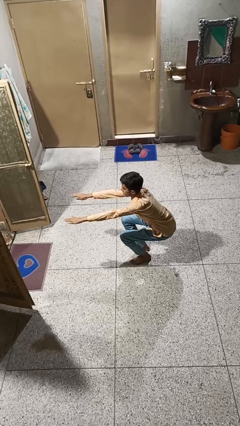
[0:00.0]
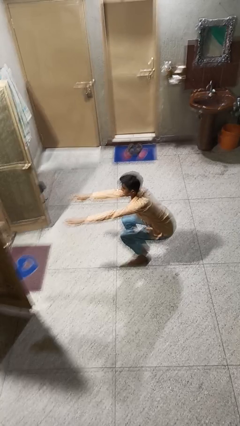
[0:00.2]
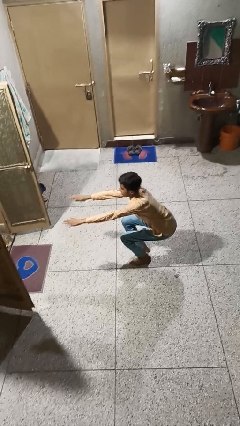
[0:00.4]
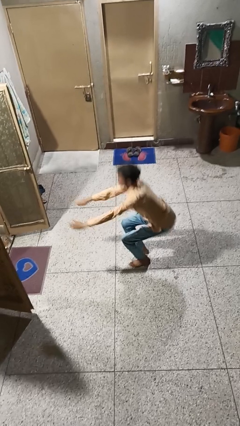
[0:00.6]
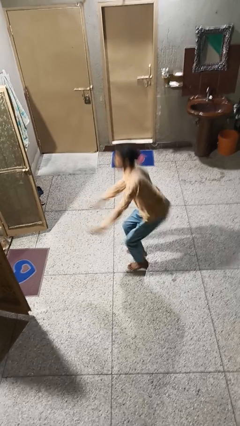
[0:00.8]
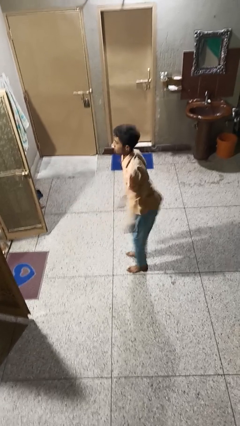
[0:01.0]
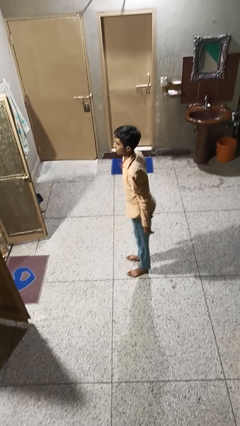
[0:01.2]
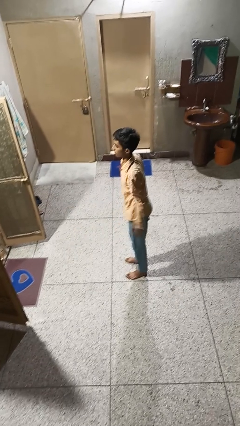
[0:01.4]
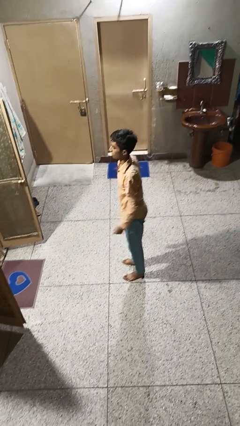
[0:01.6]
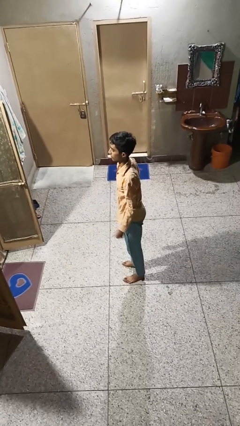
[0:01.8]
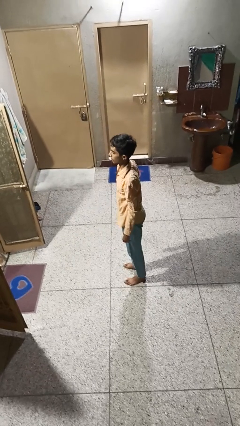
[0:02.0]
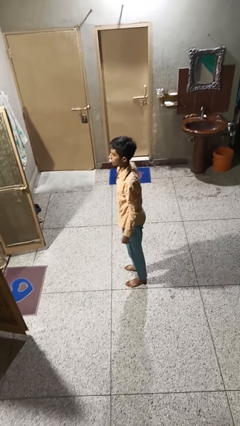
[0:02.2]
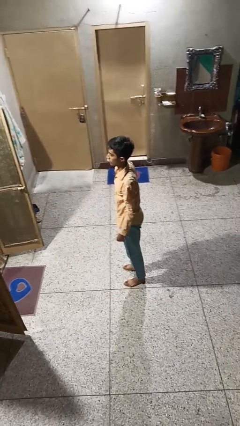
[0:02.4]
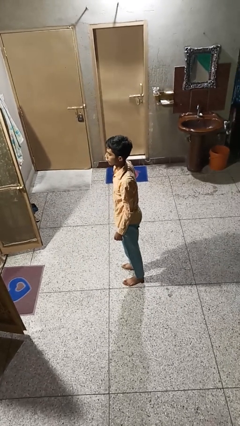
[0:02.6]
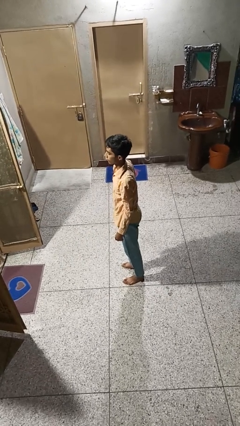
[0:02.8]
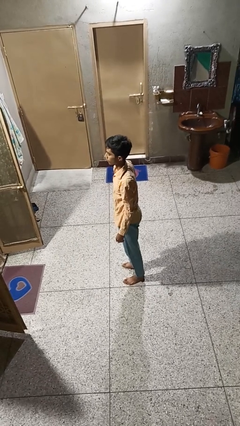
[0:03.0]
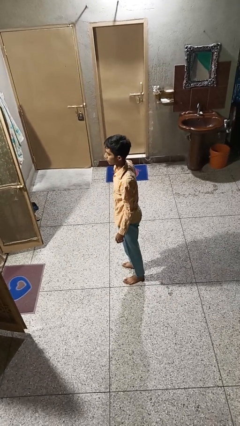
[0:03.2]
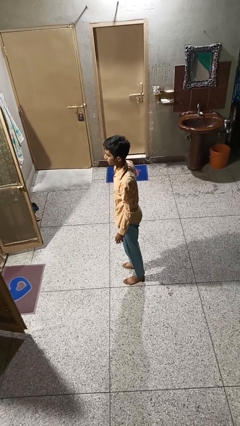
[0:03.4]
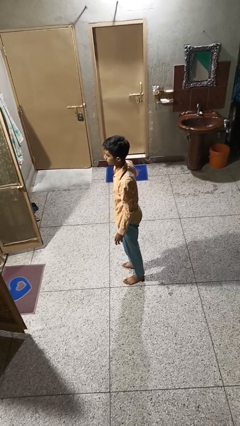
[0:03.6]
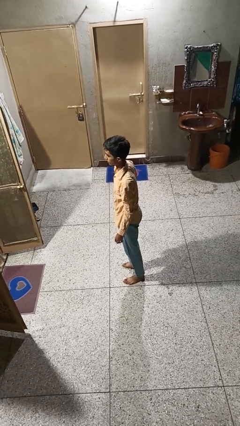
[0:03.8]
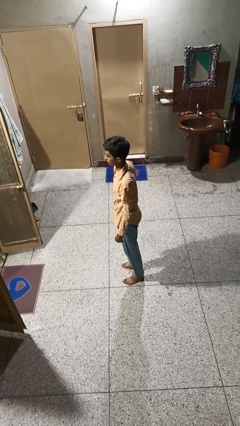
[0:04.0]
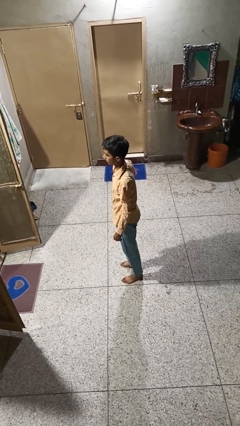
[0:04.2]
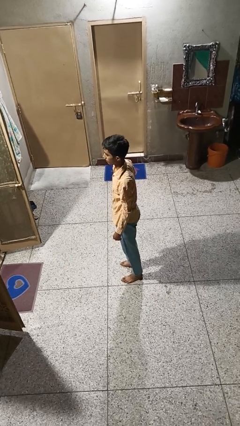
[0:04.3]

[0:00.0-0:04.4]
person stands up

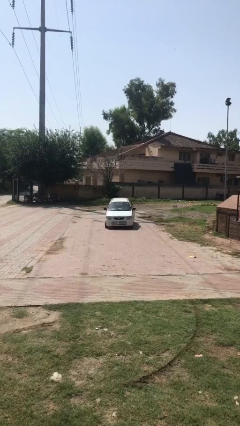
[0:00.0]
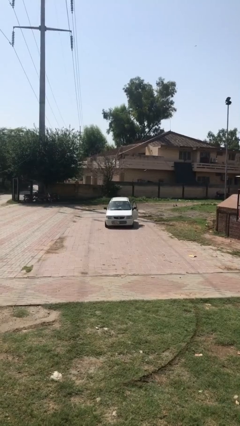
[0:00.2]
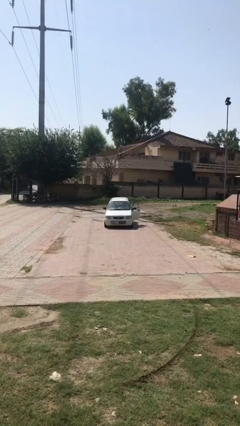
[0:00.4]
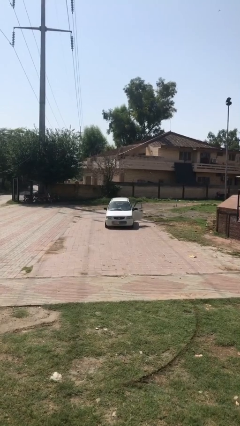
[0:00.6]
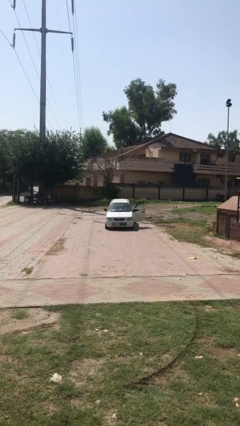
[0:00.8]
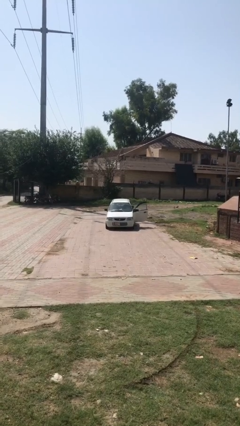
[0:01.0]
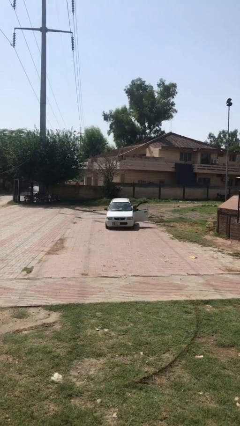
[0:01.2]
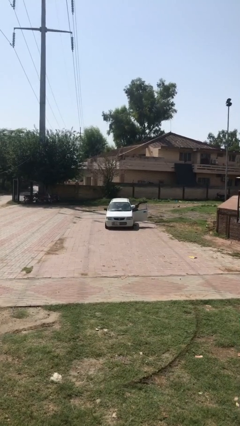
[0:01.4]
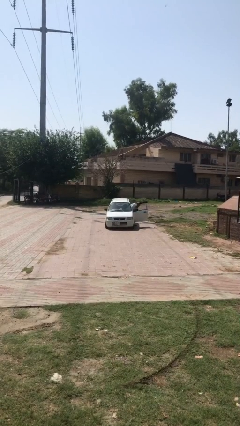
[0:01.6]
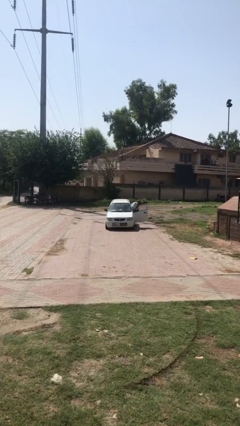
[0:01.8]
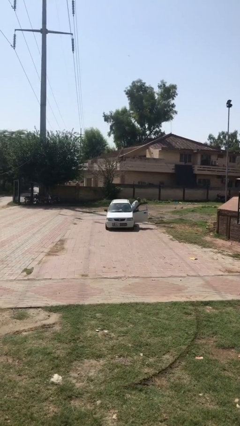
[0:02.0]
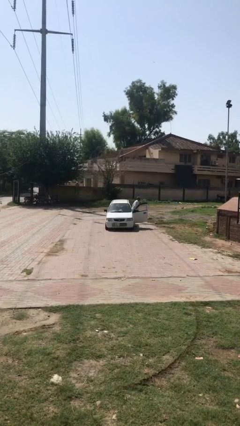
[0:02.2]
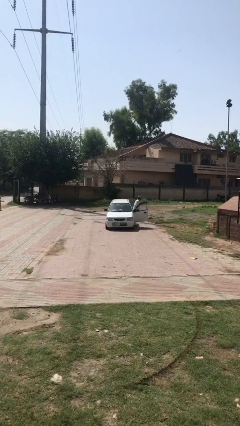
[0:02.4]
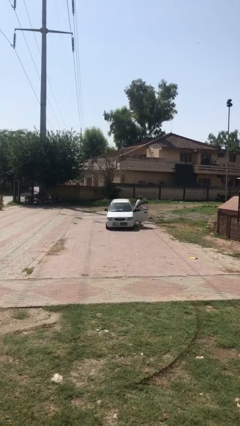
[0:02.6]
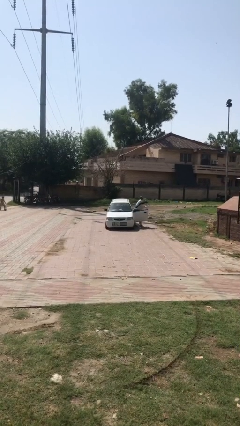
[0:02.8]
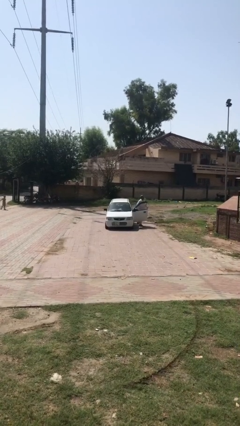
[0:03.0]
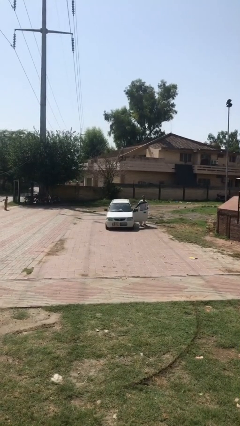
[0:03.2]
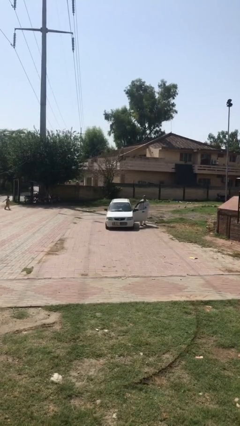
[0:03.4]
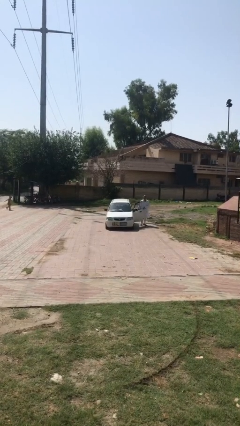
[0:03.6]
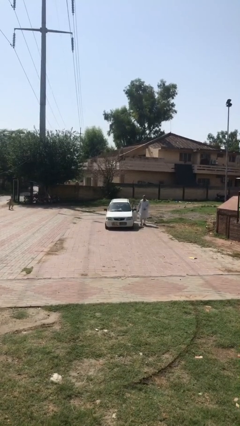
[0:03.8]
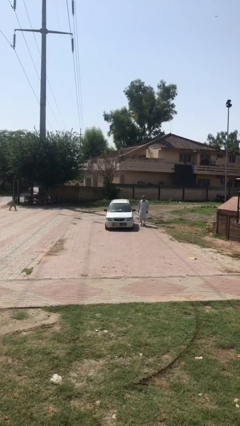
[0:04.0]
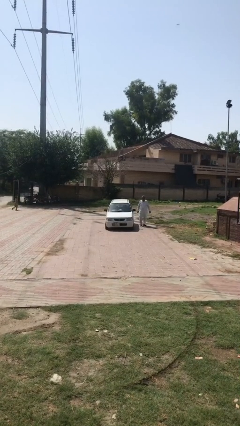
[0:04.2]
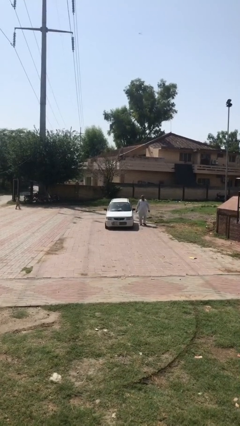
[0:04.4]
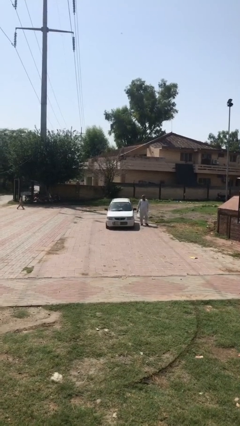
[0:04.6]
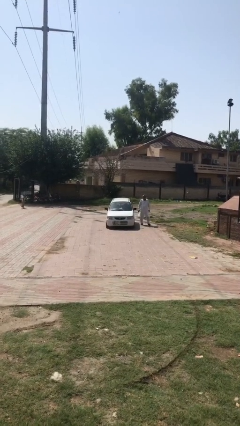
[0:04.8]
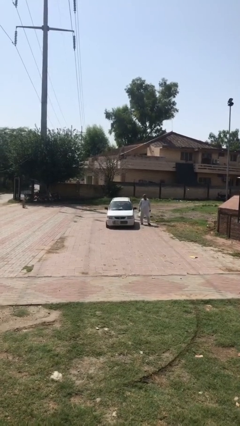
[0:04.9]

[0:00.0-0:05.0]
car drops off person

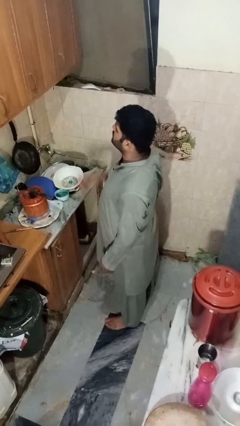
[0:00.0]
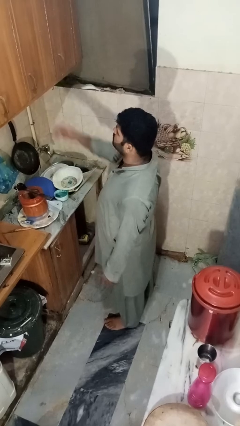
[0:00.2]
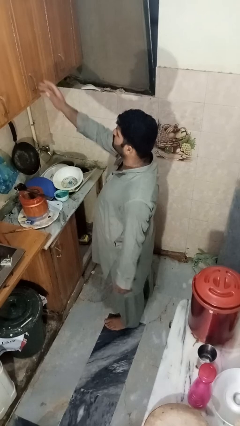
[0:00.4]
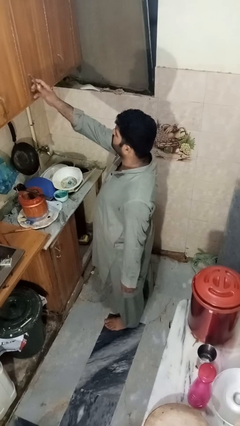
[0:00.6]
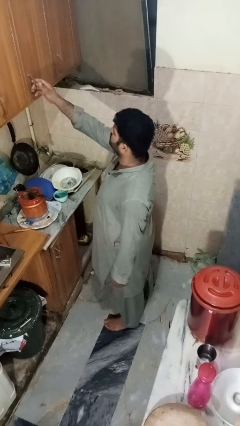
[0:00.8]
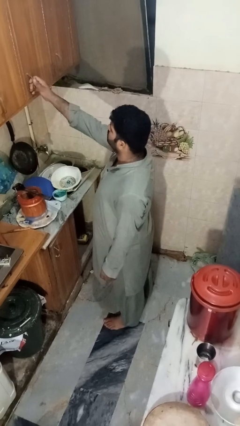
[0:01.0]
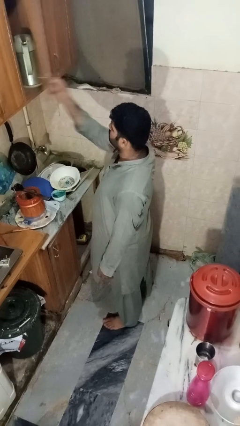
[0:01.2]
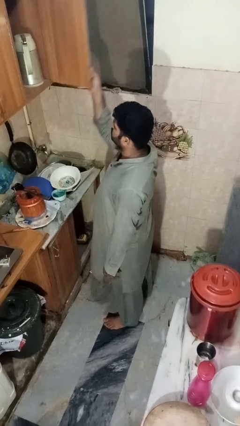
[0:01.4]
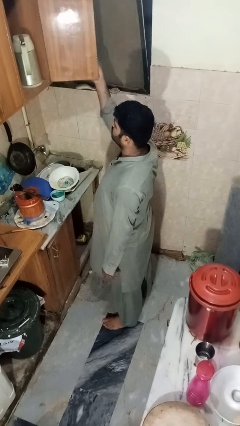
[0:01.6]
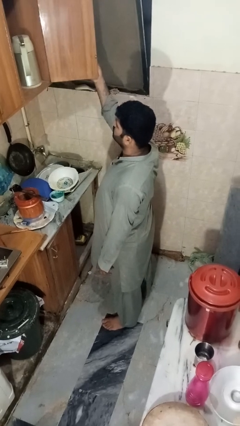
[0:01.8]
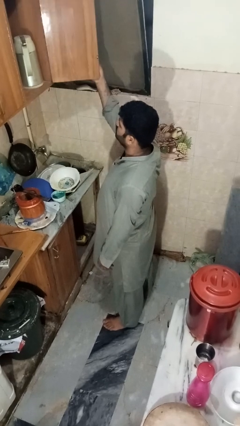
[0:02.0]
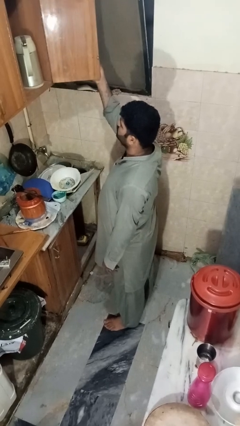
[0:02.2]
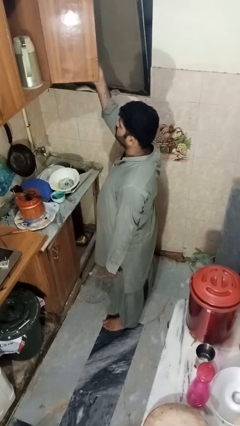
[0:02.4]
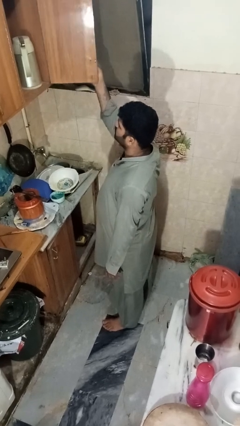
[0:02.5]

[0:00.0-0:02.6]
person opens cabinet

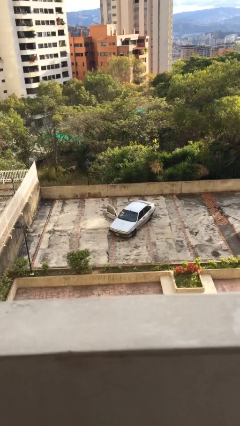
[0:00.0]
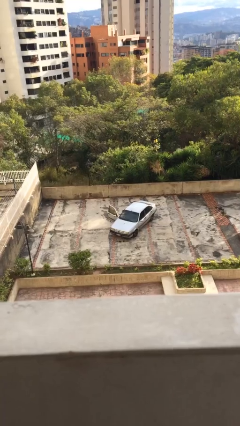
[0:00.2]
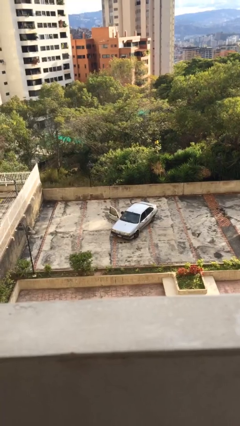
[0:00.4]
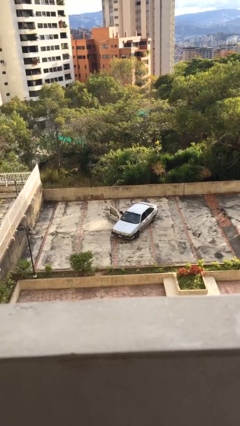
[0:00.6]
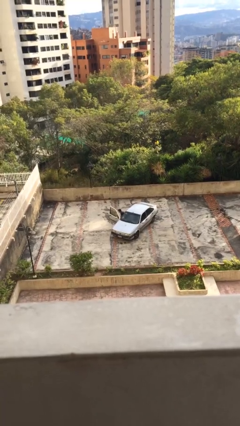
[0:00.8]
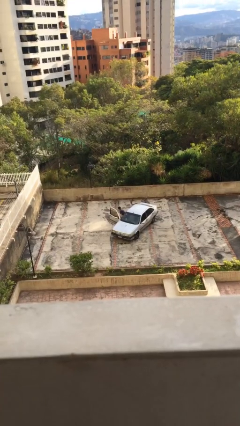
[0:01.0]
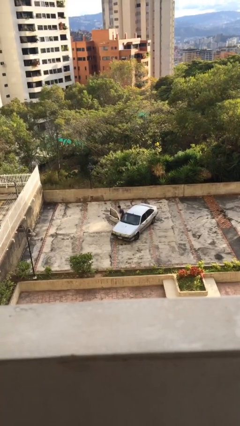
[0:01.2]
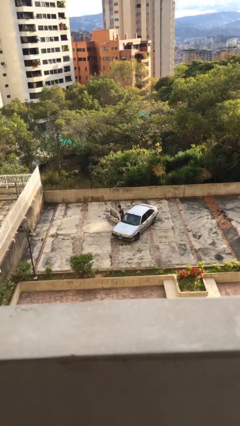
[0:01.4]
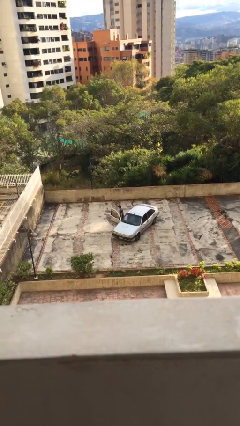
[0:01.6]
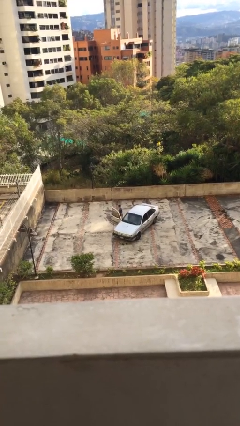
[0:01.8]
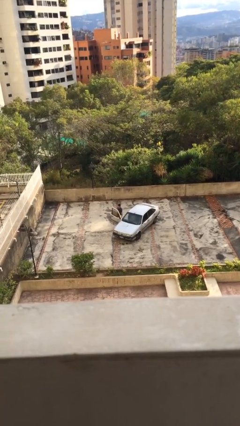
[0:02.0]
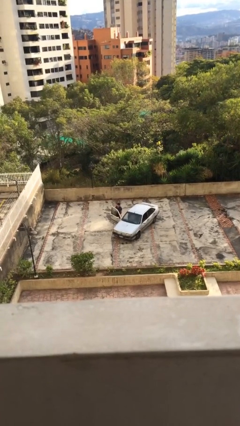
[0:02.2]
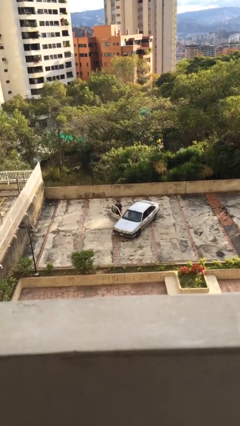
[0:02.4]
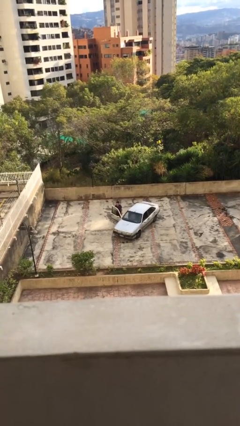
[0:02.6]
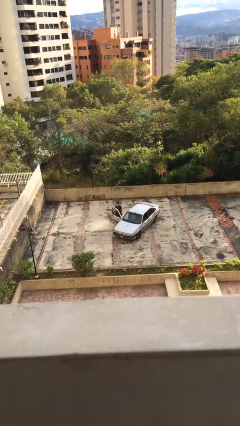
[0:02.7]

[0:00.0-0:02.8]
person exits car

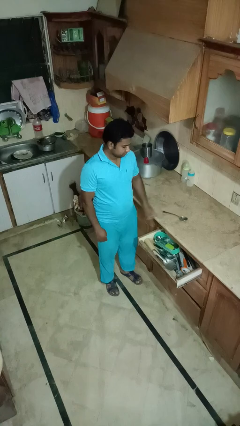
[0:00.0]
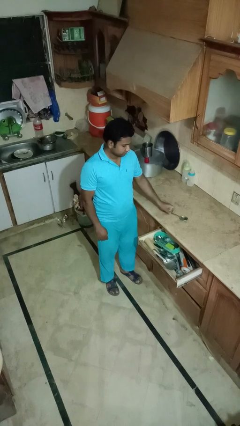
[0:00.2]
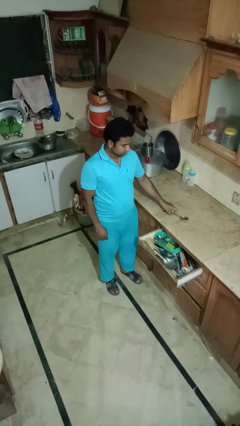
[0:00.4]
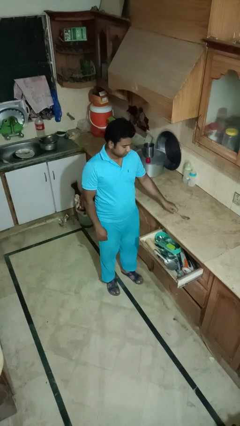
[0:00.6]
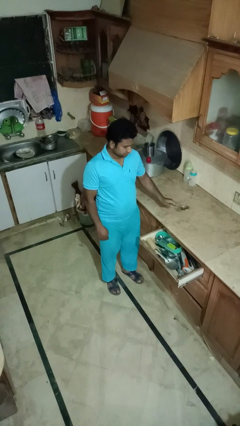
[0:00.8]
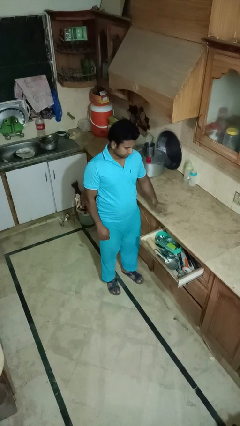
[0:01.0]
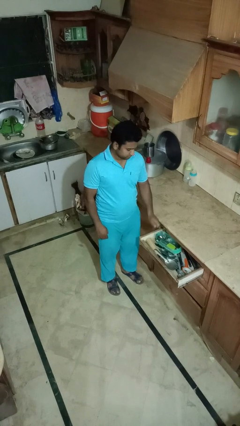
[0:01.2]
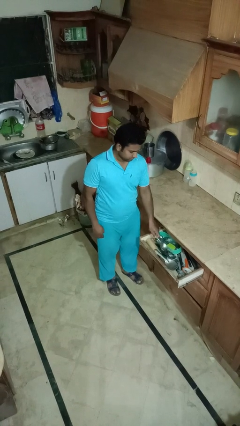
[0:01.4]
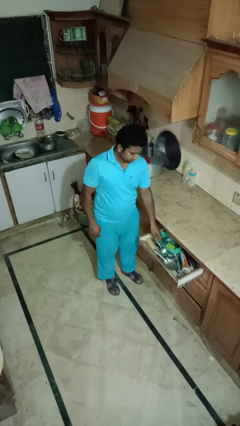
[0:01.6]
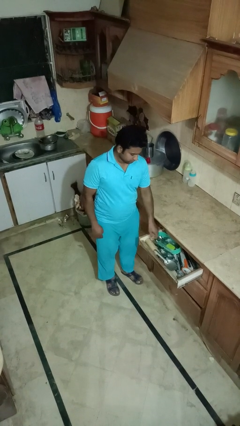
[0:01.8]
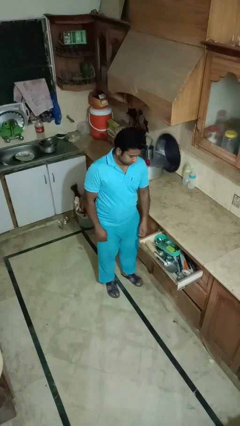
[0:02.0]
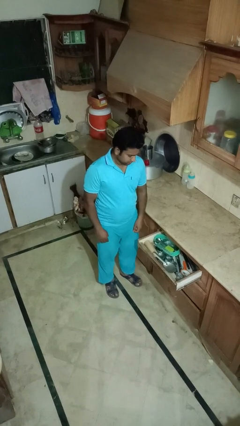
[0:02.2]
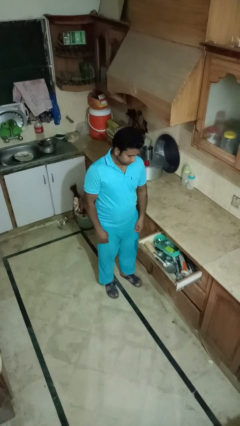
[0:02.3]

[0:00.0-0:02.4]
person puts object into kitchen drawer
